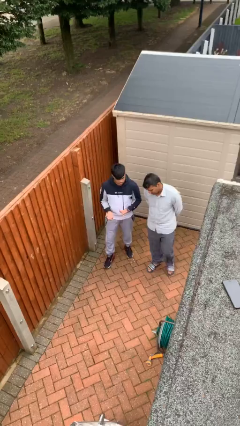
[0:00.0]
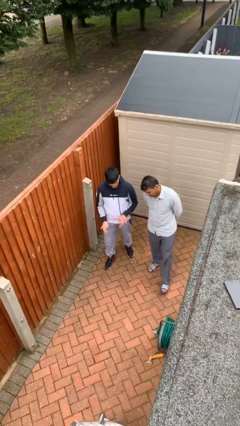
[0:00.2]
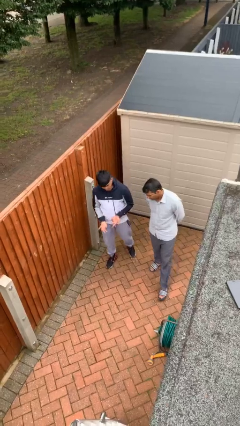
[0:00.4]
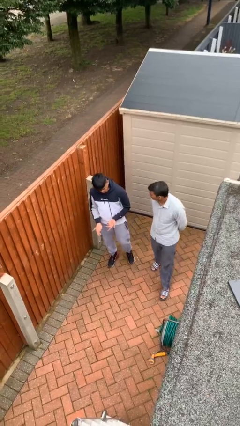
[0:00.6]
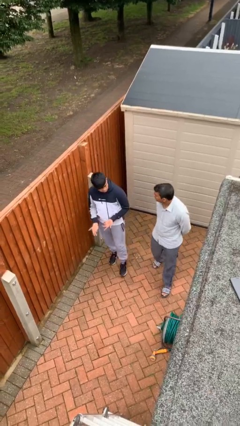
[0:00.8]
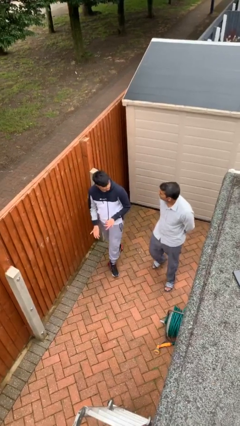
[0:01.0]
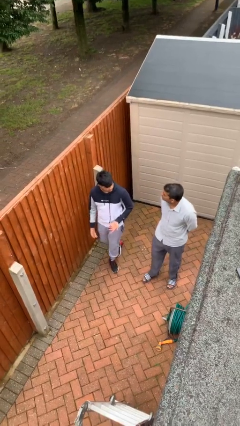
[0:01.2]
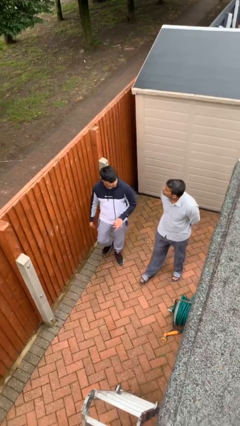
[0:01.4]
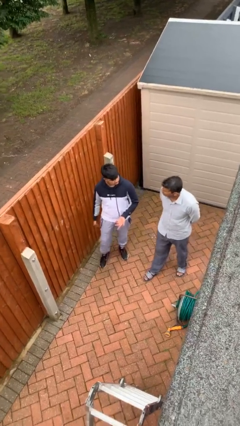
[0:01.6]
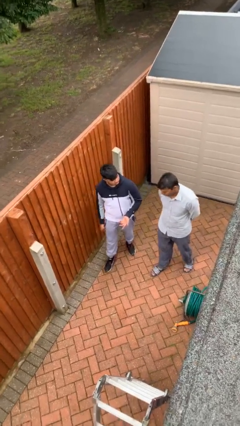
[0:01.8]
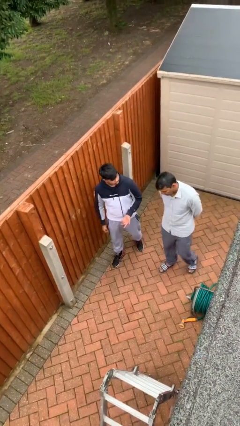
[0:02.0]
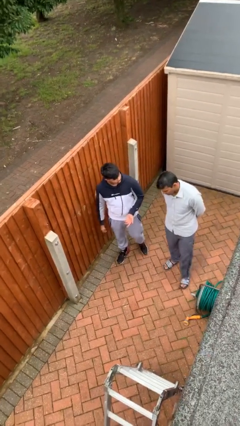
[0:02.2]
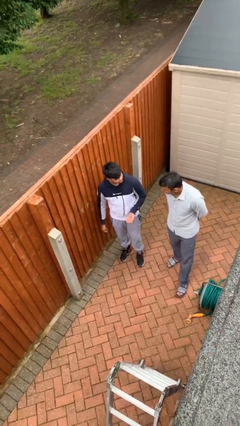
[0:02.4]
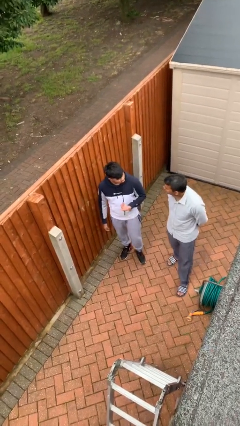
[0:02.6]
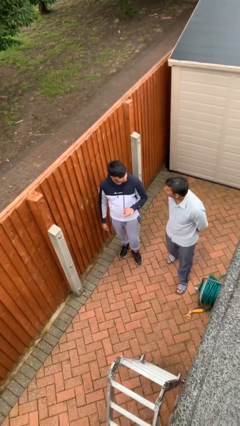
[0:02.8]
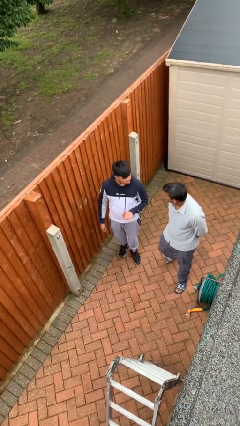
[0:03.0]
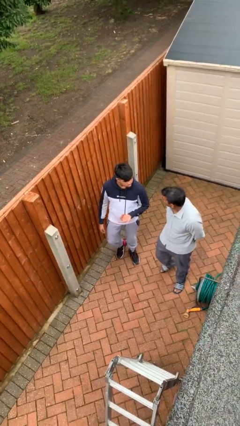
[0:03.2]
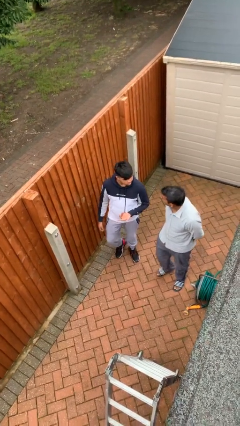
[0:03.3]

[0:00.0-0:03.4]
person talks to person

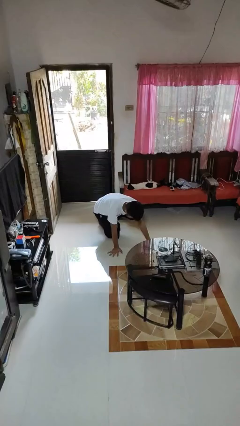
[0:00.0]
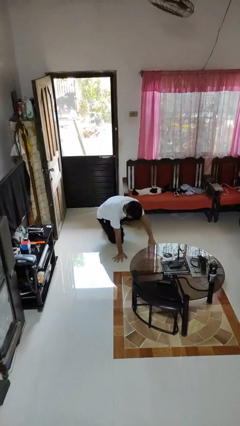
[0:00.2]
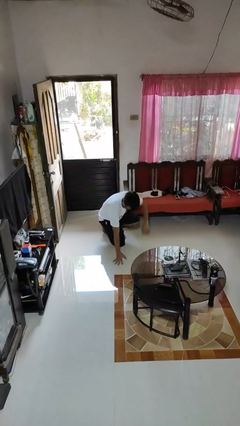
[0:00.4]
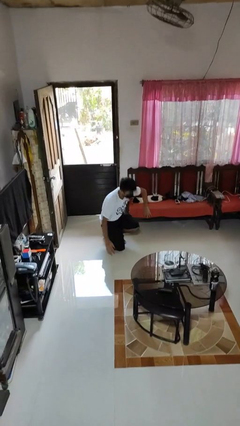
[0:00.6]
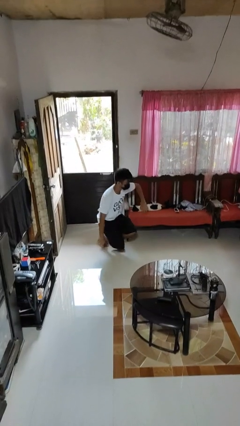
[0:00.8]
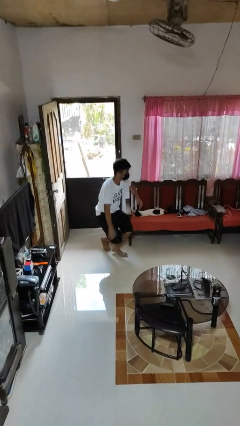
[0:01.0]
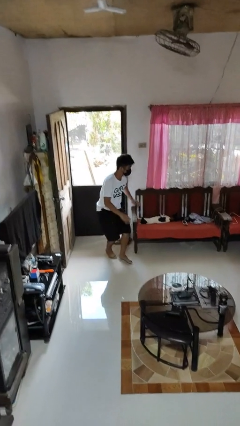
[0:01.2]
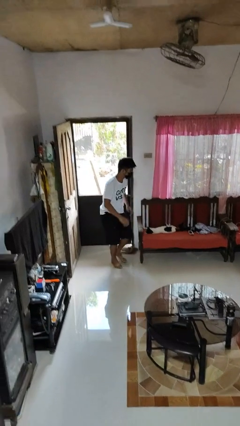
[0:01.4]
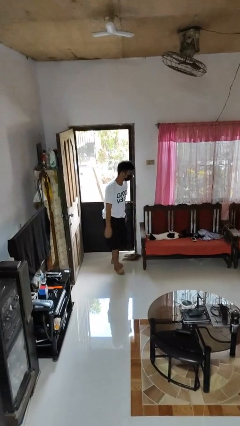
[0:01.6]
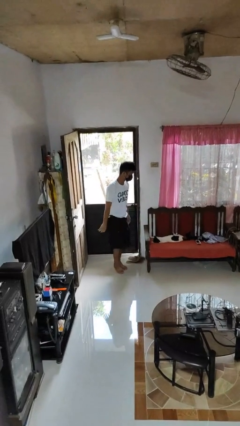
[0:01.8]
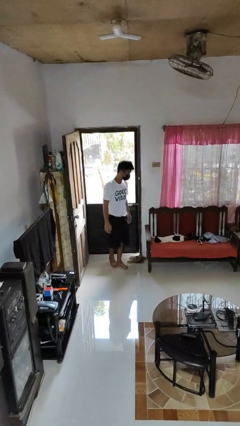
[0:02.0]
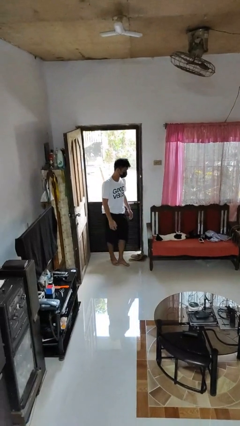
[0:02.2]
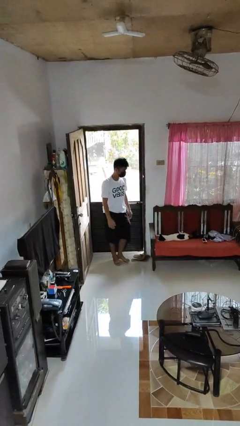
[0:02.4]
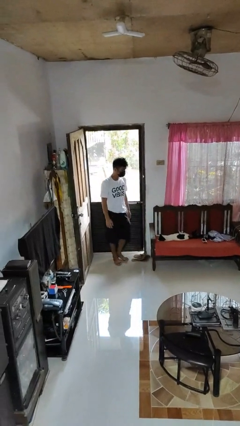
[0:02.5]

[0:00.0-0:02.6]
person stands up from floor

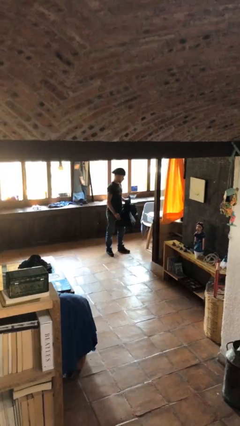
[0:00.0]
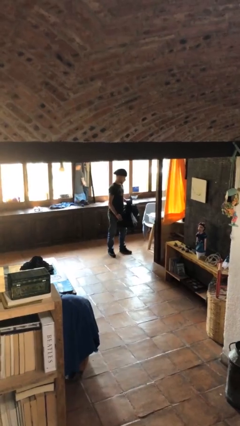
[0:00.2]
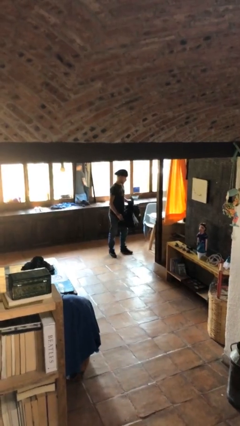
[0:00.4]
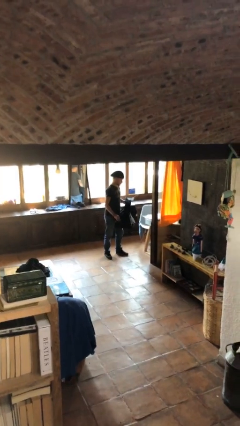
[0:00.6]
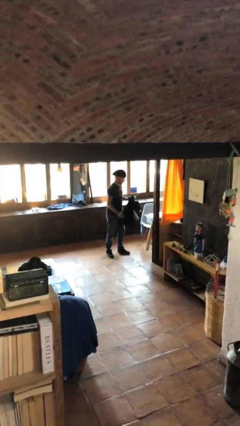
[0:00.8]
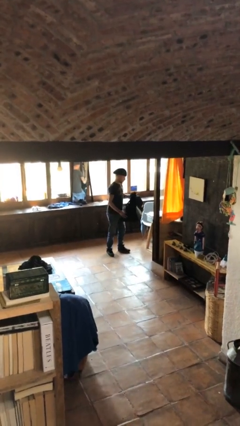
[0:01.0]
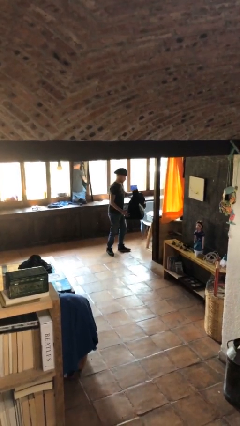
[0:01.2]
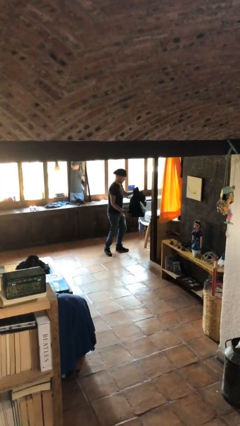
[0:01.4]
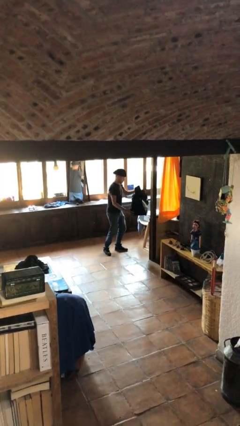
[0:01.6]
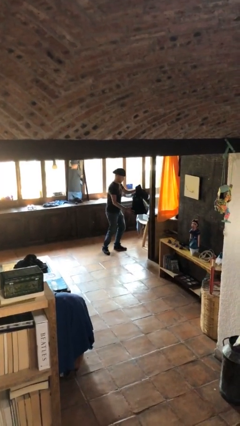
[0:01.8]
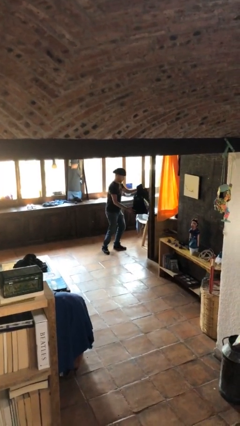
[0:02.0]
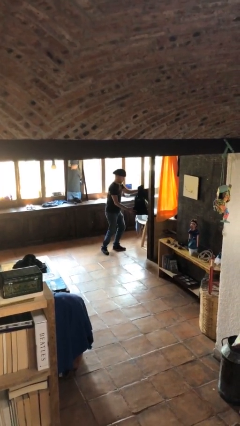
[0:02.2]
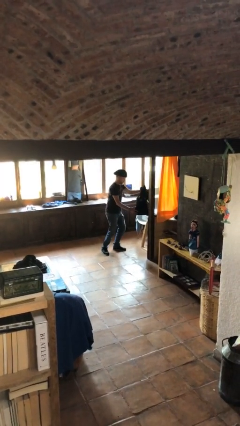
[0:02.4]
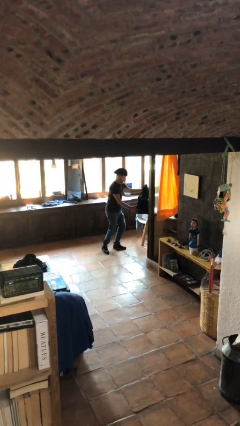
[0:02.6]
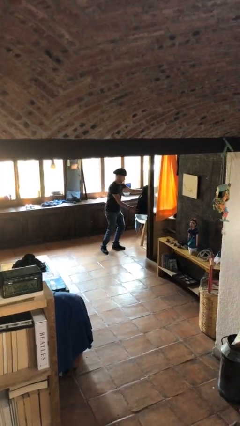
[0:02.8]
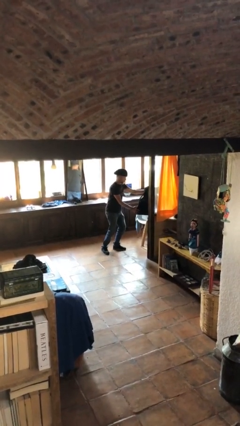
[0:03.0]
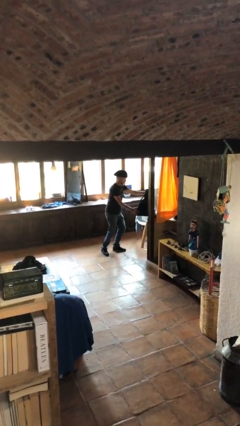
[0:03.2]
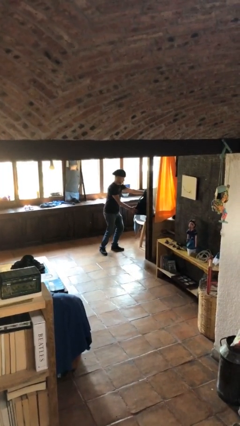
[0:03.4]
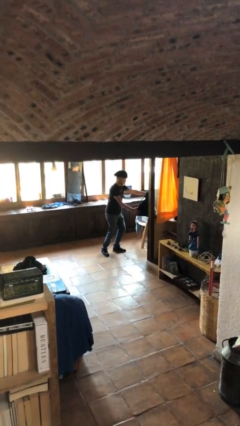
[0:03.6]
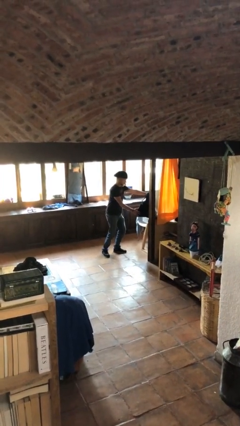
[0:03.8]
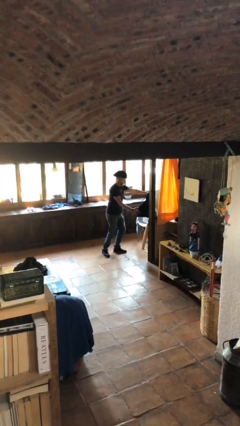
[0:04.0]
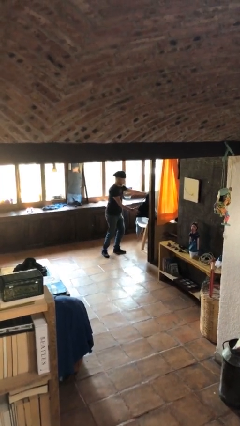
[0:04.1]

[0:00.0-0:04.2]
person puts down object on table

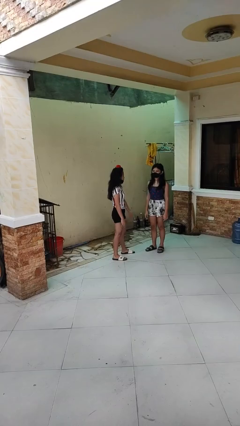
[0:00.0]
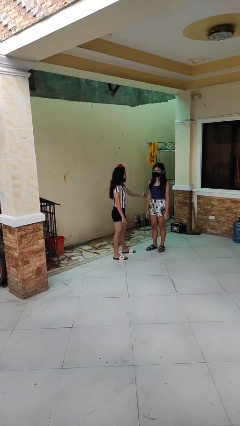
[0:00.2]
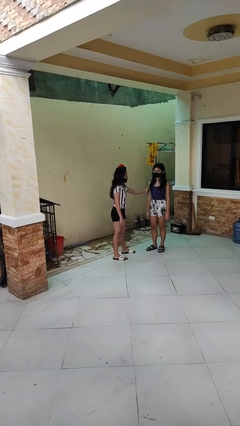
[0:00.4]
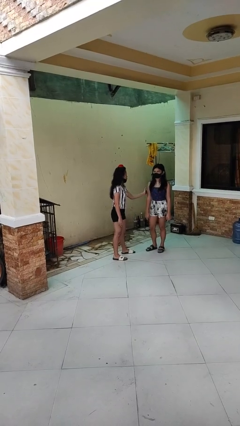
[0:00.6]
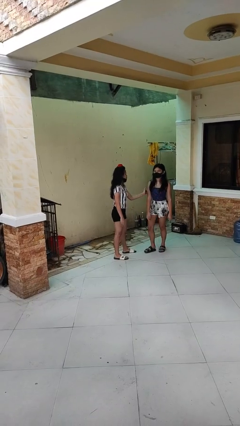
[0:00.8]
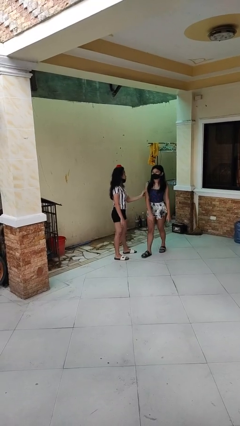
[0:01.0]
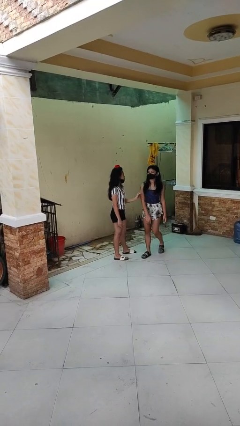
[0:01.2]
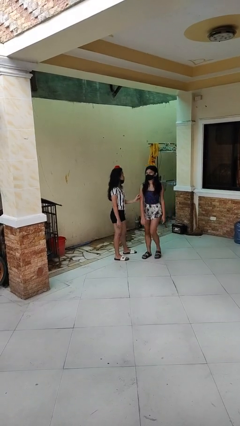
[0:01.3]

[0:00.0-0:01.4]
person grabs person by bicep

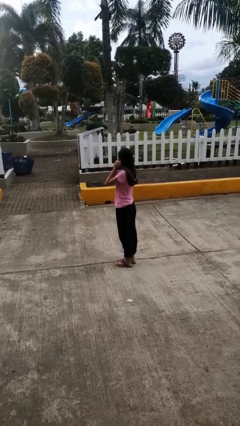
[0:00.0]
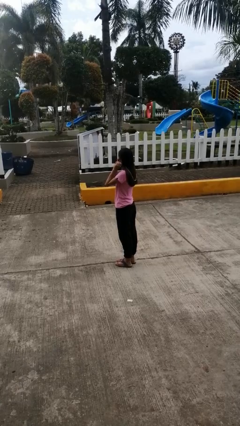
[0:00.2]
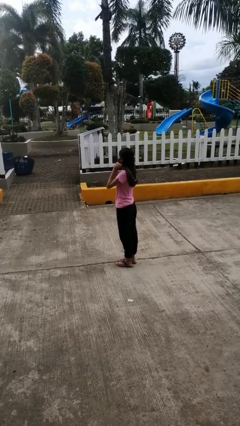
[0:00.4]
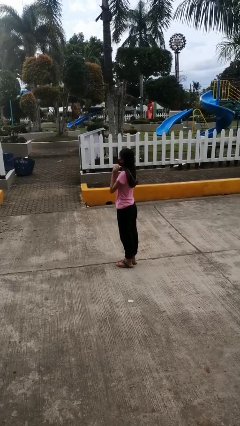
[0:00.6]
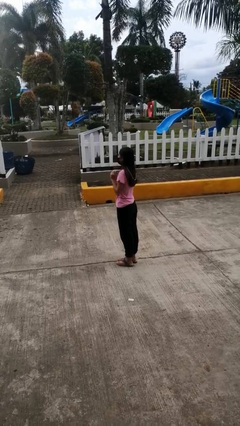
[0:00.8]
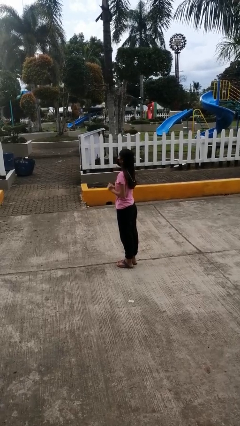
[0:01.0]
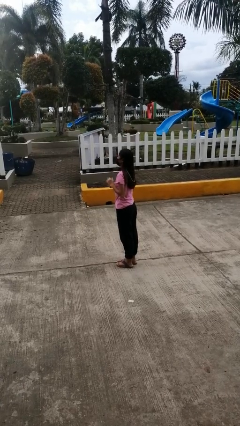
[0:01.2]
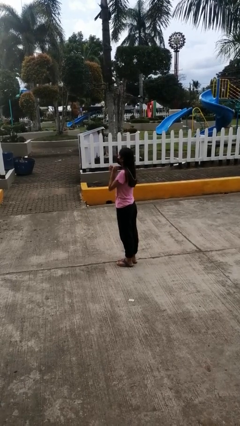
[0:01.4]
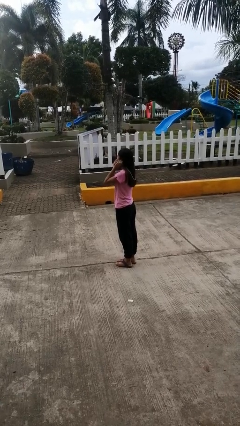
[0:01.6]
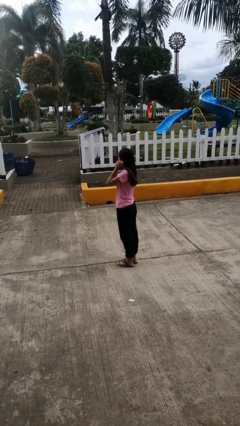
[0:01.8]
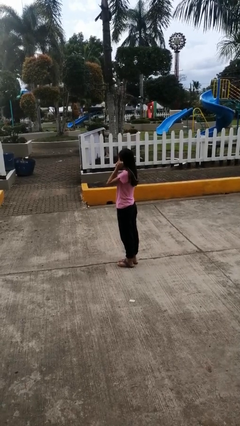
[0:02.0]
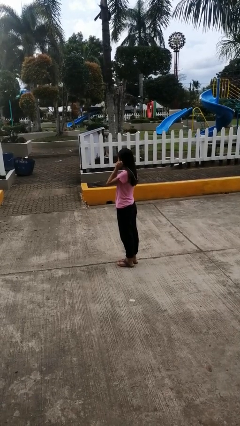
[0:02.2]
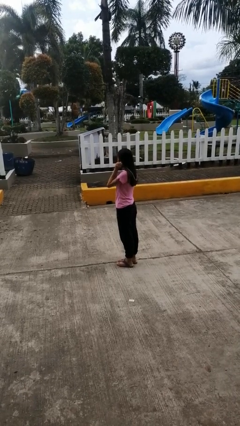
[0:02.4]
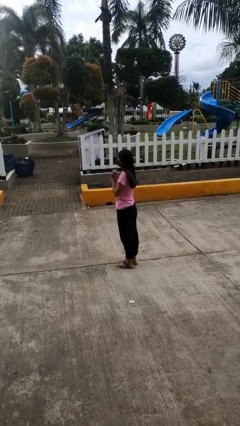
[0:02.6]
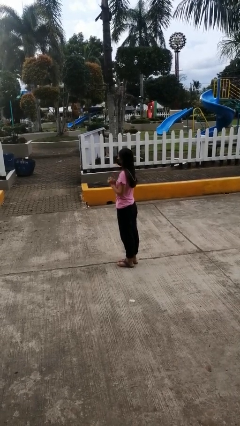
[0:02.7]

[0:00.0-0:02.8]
person takes off earrings

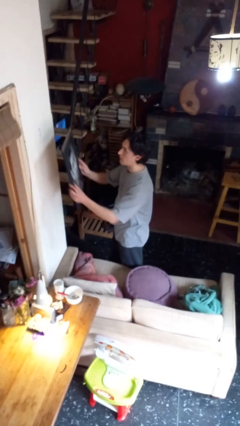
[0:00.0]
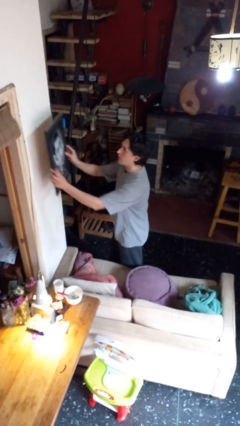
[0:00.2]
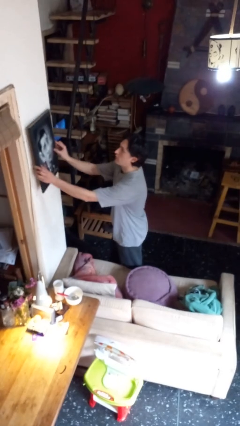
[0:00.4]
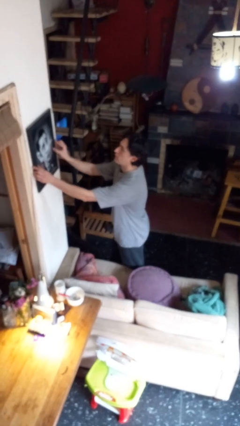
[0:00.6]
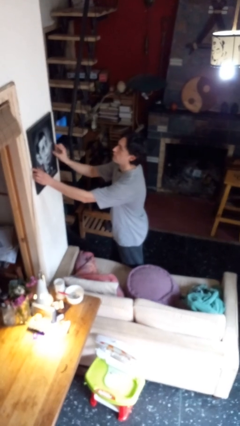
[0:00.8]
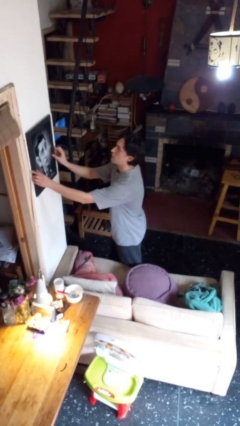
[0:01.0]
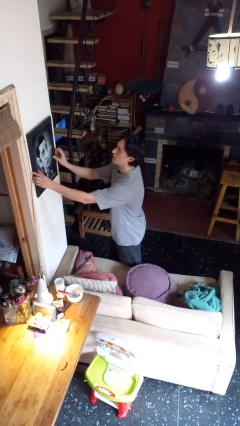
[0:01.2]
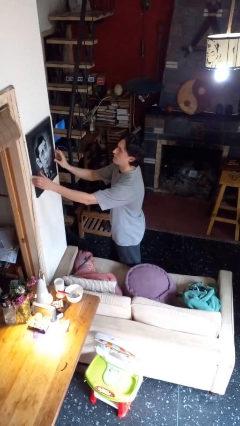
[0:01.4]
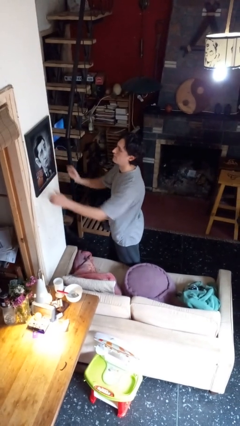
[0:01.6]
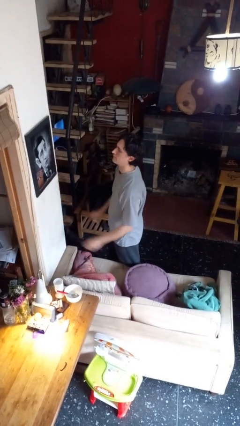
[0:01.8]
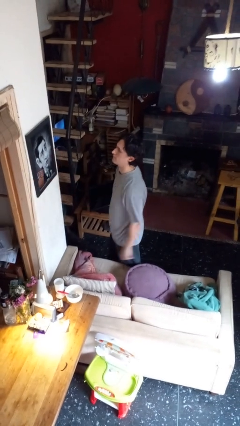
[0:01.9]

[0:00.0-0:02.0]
person puts up picture frame

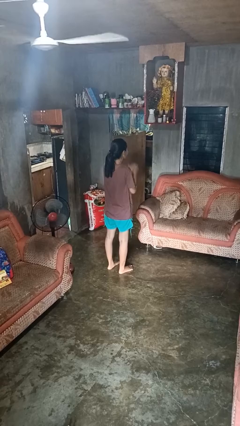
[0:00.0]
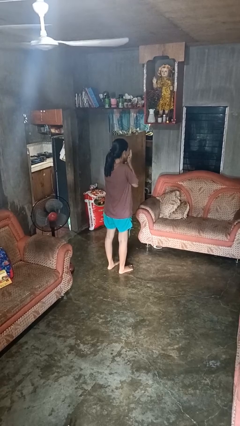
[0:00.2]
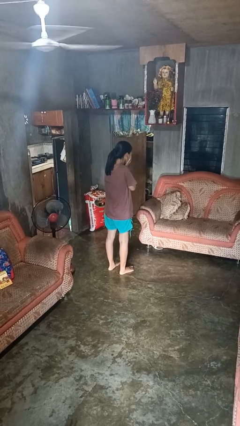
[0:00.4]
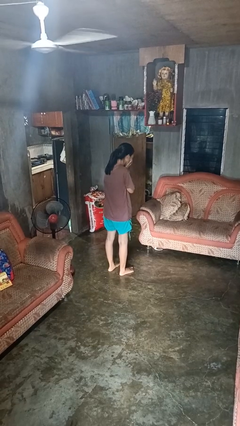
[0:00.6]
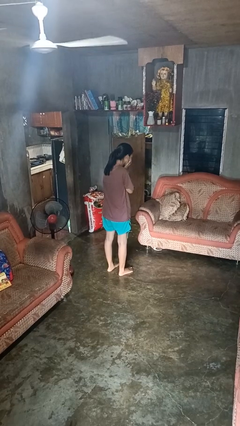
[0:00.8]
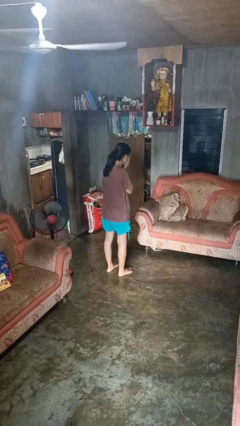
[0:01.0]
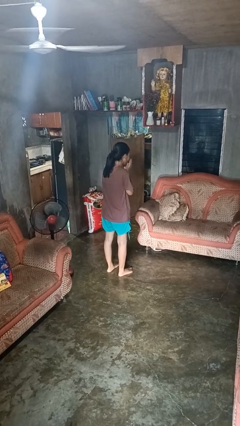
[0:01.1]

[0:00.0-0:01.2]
person sneezes into hand
